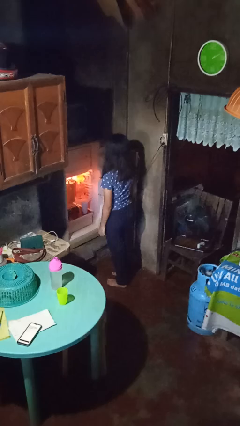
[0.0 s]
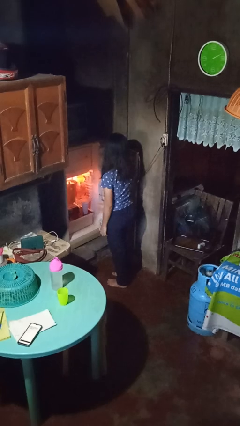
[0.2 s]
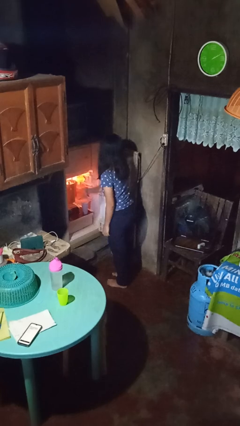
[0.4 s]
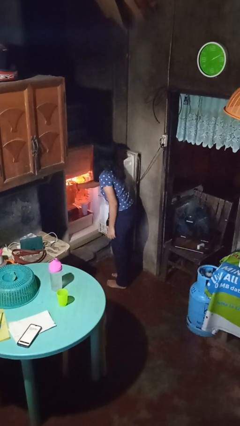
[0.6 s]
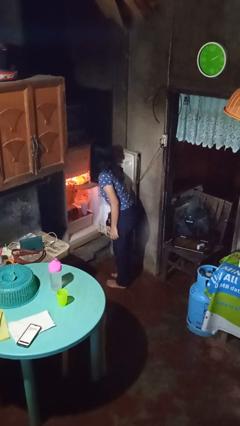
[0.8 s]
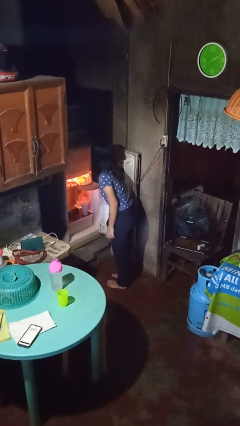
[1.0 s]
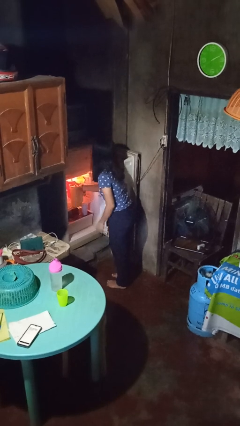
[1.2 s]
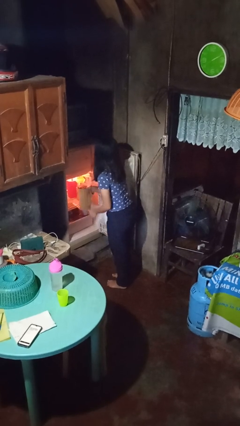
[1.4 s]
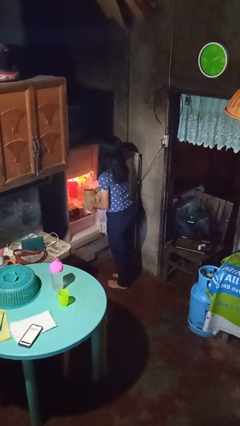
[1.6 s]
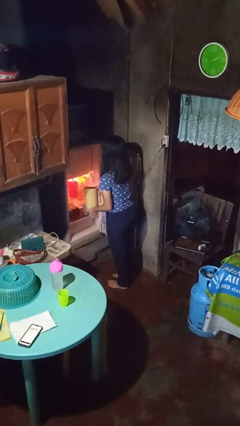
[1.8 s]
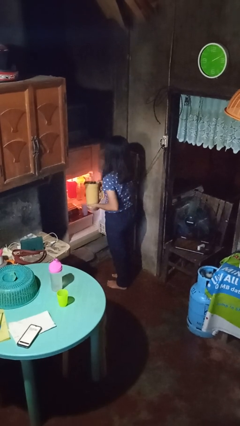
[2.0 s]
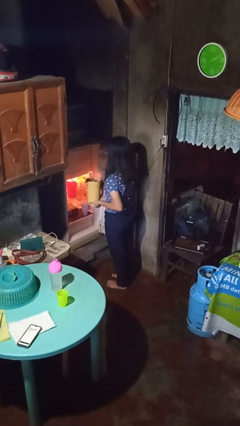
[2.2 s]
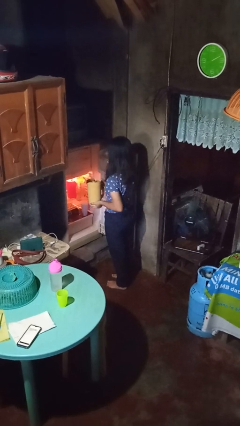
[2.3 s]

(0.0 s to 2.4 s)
person takes object from refrigerator

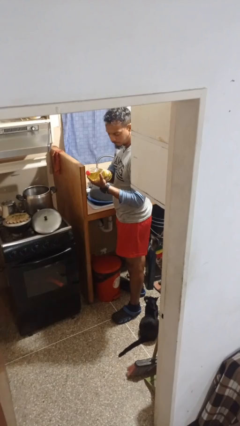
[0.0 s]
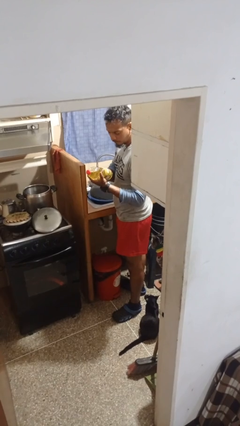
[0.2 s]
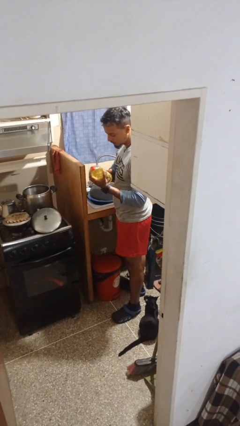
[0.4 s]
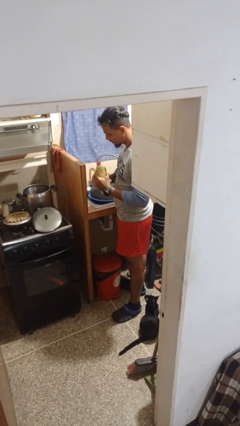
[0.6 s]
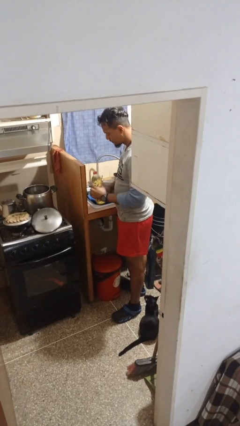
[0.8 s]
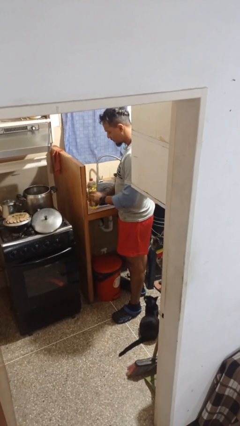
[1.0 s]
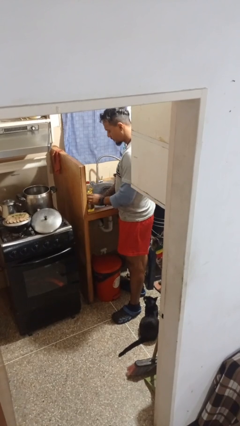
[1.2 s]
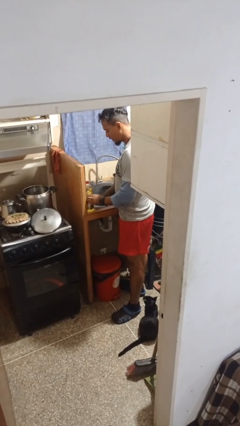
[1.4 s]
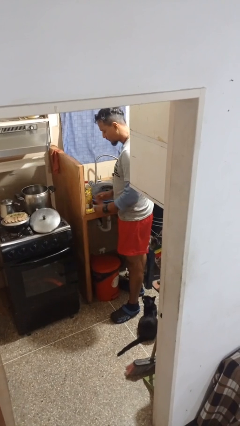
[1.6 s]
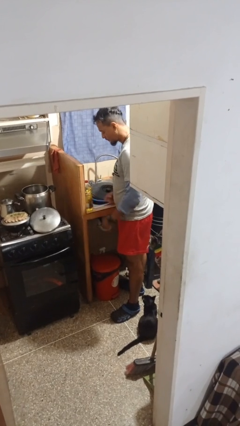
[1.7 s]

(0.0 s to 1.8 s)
person puts down object on countertop

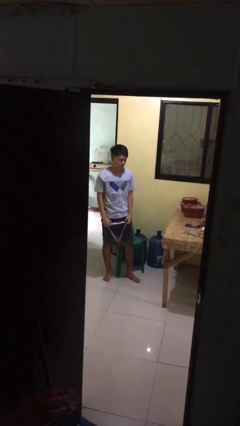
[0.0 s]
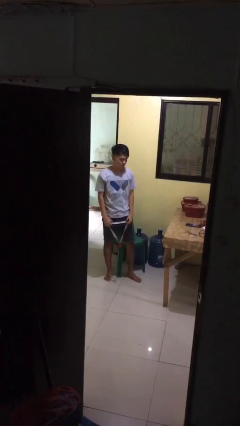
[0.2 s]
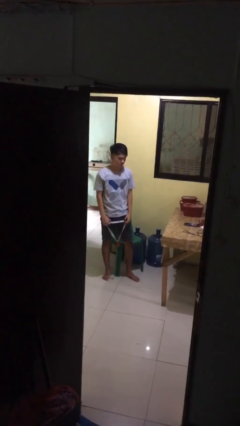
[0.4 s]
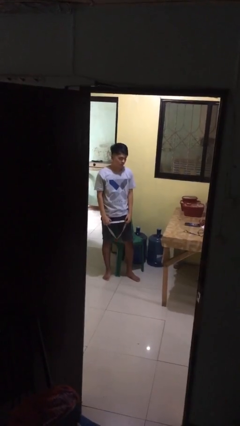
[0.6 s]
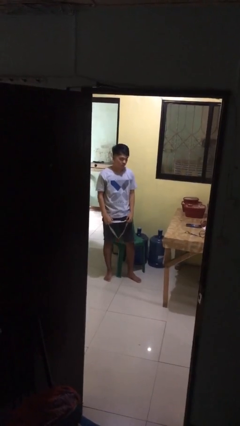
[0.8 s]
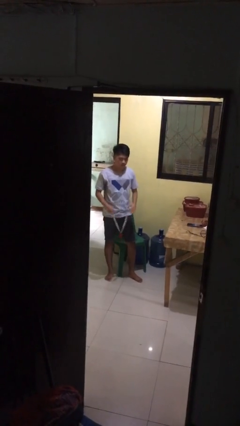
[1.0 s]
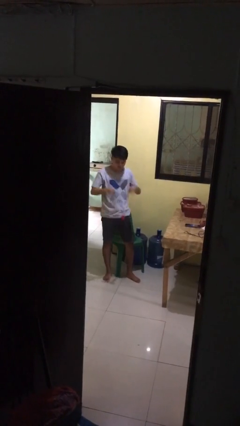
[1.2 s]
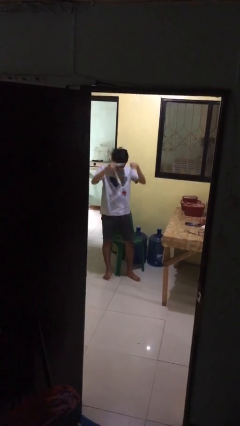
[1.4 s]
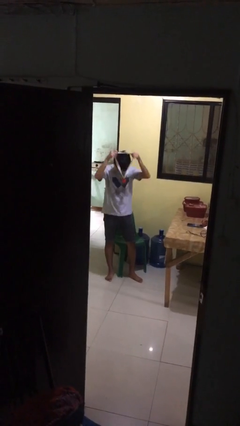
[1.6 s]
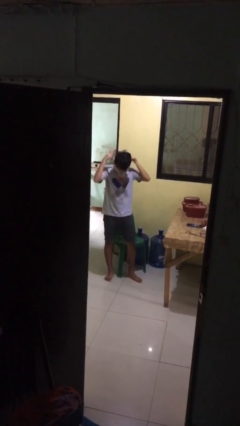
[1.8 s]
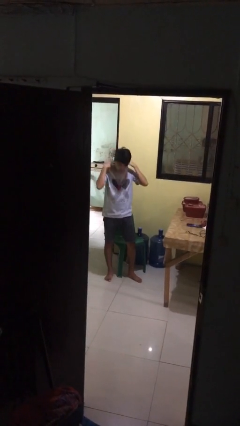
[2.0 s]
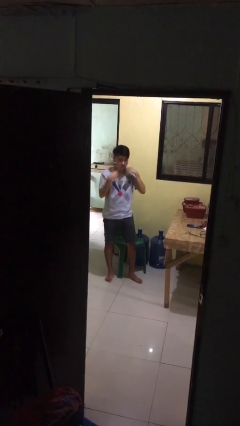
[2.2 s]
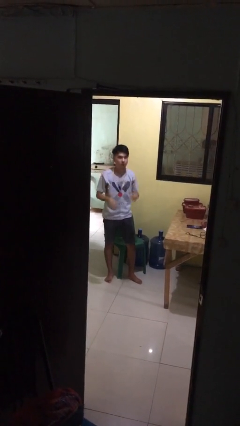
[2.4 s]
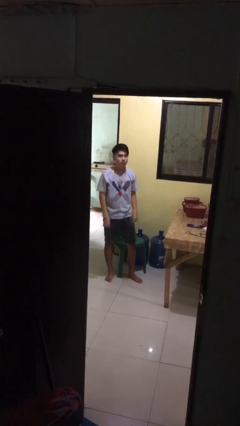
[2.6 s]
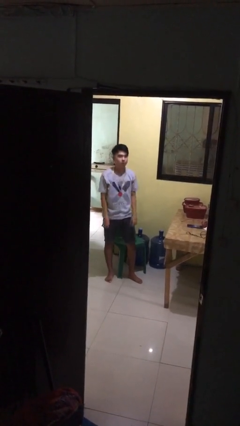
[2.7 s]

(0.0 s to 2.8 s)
person puts on necklace

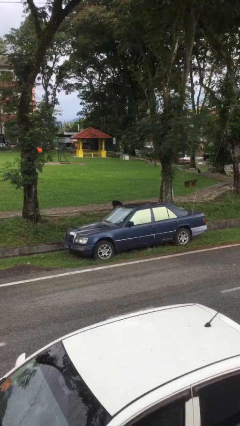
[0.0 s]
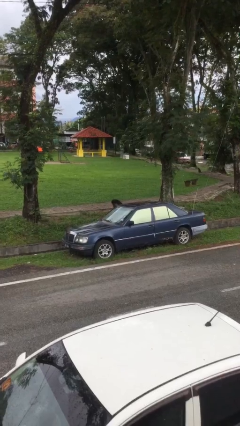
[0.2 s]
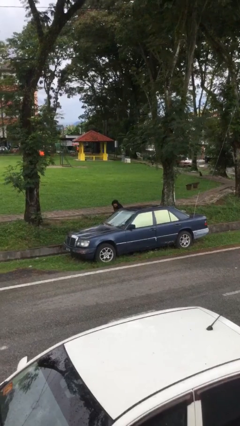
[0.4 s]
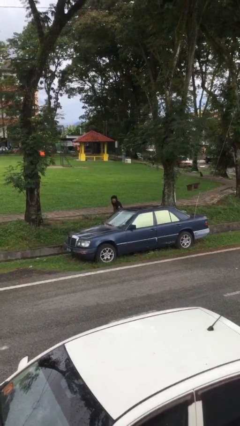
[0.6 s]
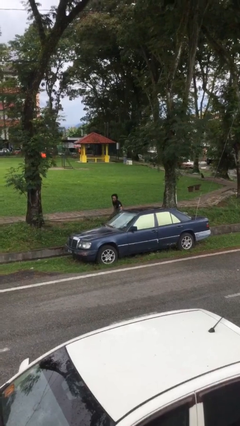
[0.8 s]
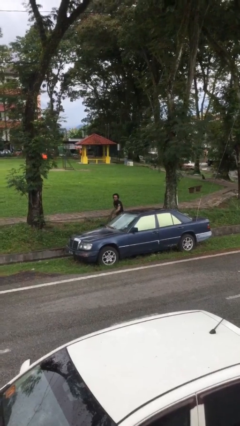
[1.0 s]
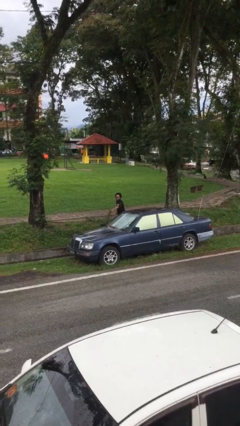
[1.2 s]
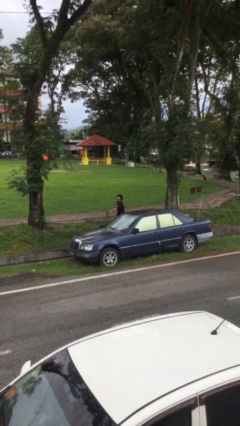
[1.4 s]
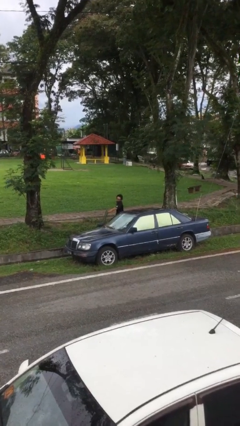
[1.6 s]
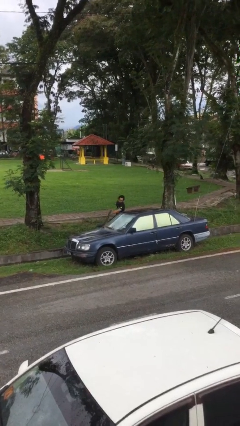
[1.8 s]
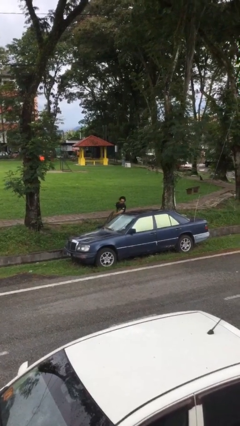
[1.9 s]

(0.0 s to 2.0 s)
person opens car door

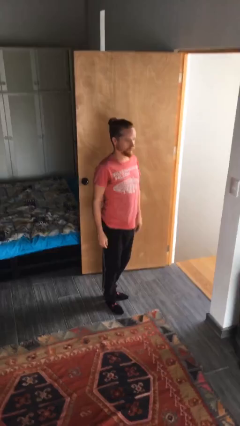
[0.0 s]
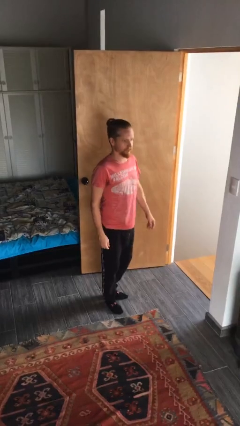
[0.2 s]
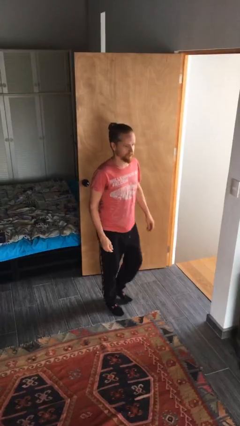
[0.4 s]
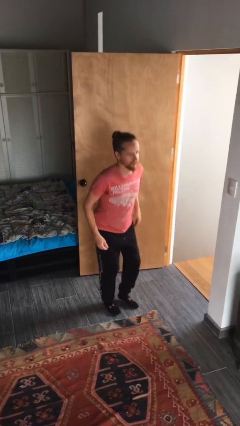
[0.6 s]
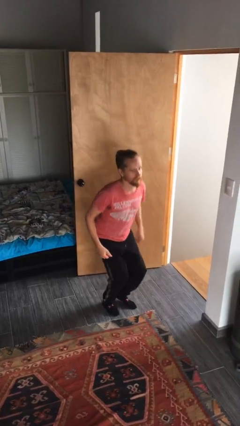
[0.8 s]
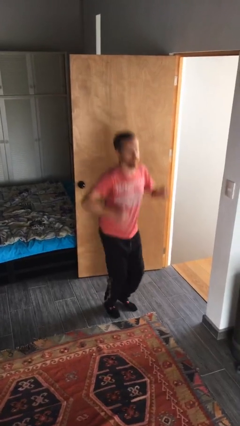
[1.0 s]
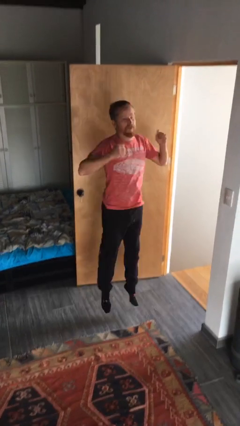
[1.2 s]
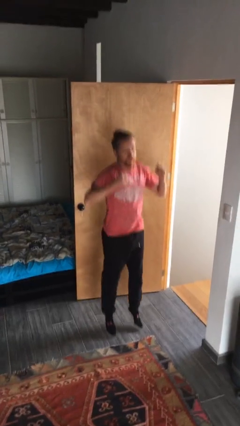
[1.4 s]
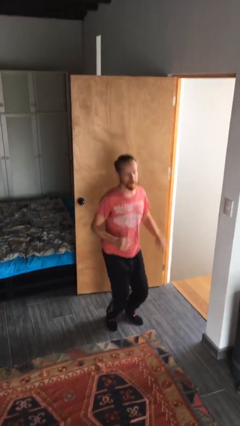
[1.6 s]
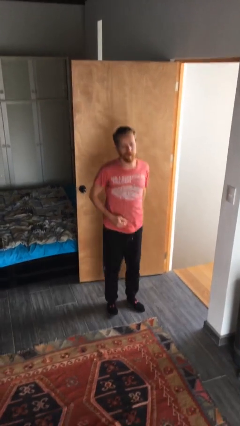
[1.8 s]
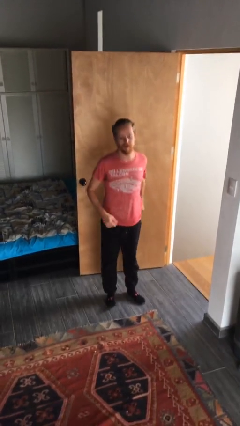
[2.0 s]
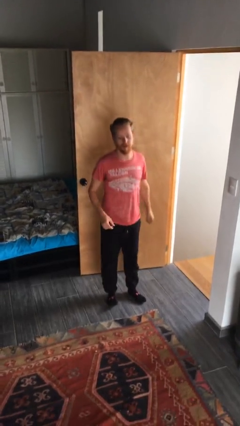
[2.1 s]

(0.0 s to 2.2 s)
person jumps

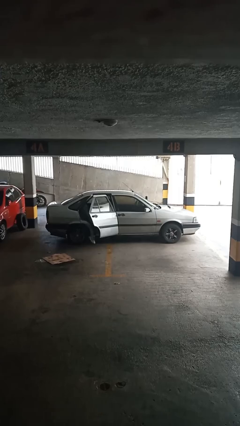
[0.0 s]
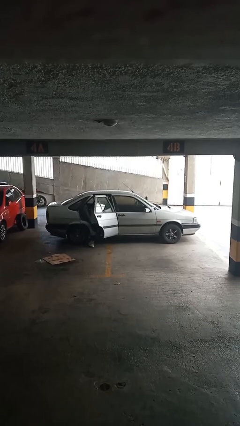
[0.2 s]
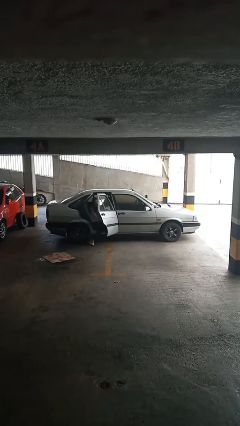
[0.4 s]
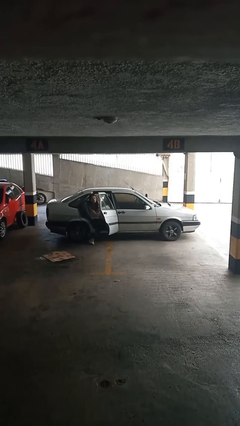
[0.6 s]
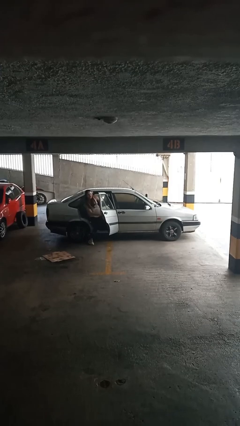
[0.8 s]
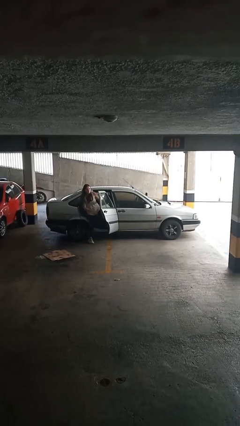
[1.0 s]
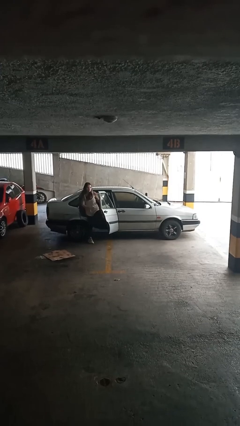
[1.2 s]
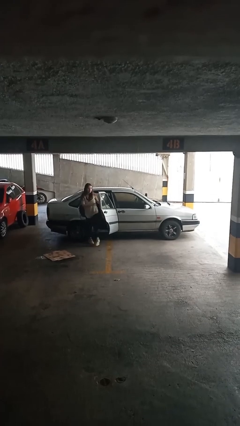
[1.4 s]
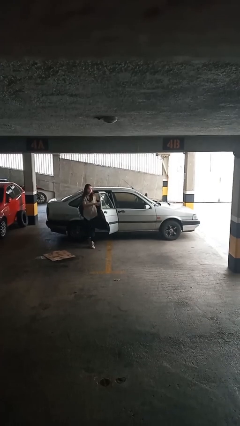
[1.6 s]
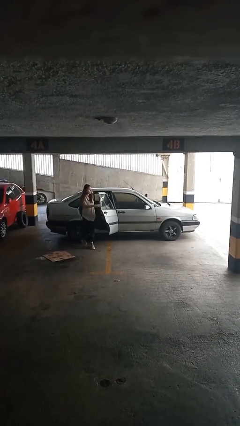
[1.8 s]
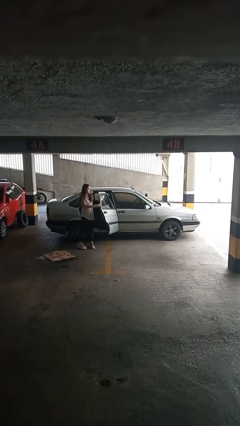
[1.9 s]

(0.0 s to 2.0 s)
car drops off person

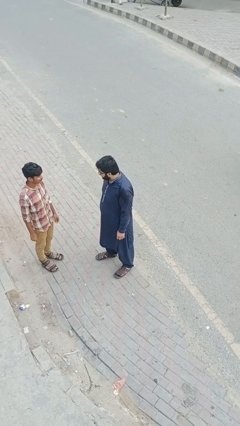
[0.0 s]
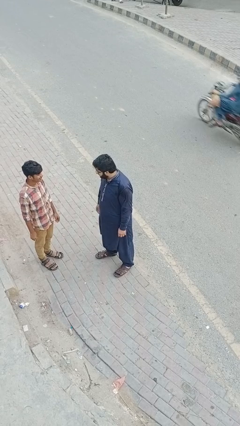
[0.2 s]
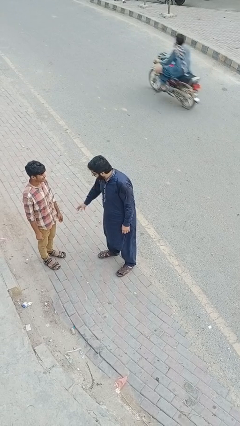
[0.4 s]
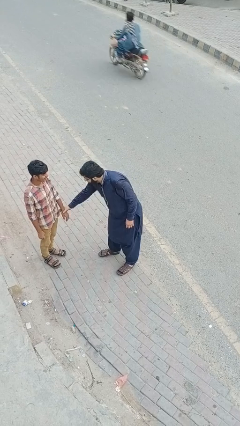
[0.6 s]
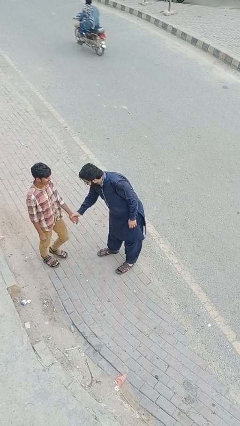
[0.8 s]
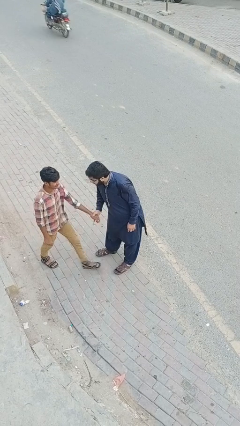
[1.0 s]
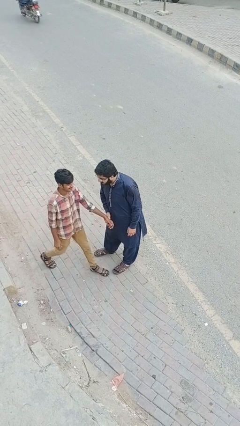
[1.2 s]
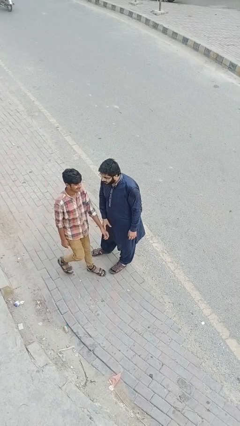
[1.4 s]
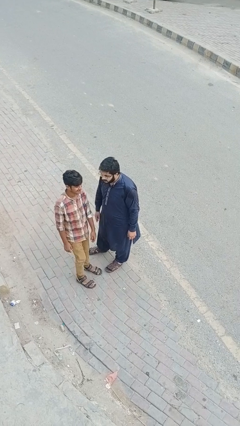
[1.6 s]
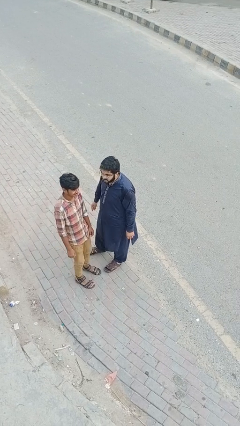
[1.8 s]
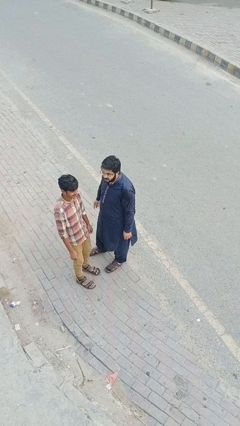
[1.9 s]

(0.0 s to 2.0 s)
person grabs person by forearm

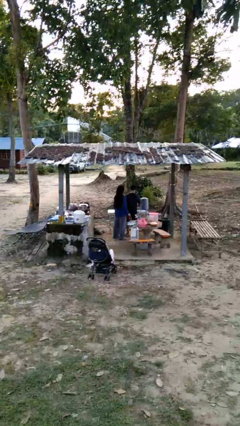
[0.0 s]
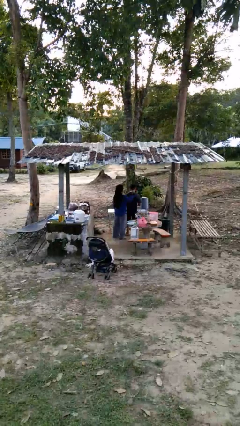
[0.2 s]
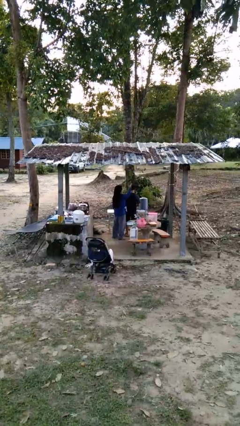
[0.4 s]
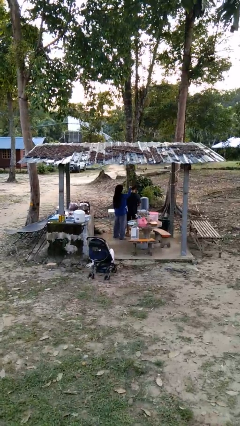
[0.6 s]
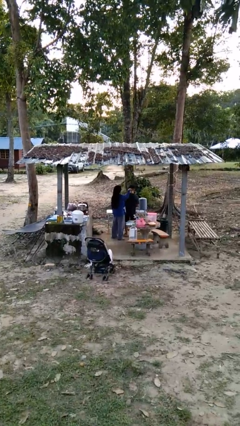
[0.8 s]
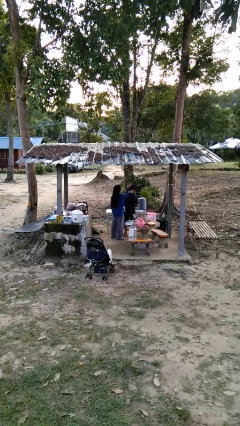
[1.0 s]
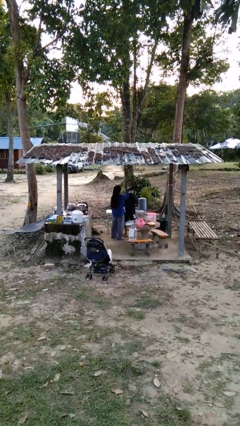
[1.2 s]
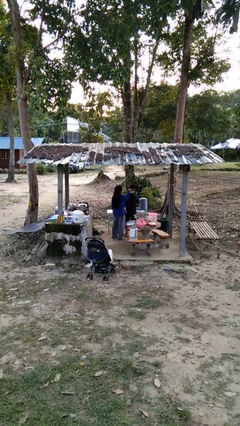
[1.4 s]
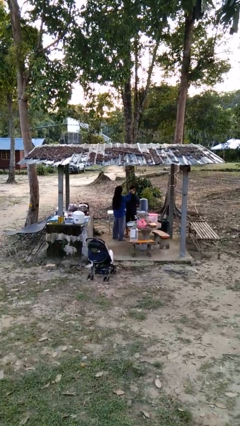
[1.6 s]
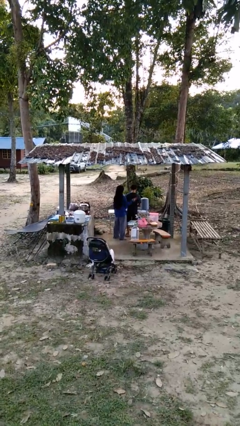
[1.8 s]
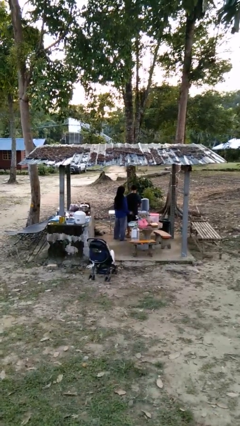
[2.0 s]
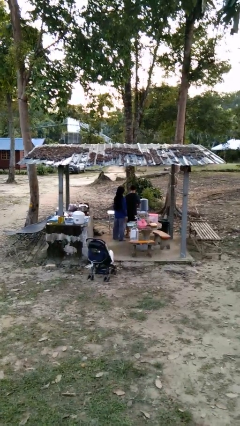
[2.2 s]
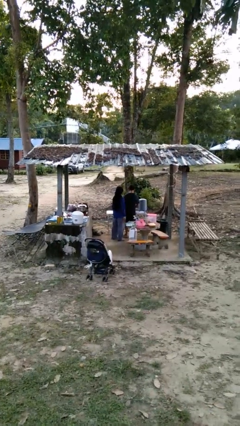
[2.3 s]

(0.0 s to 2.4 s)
person brushes hair of person
